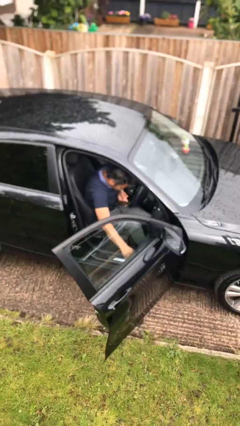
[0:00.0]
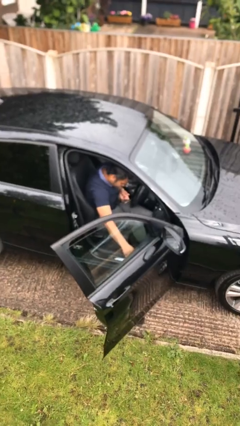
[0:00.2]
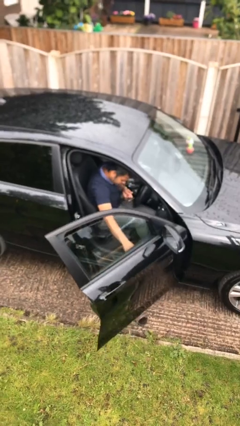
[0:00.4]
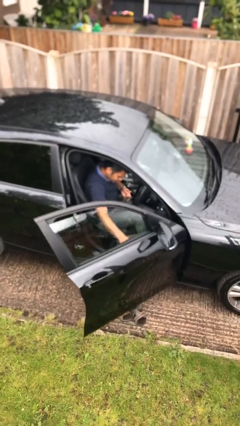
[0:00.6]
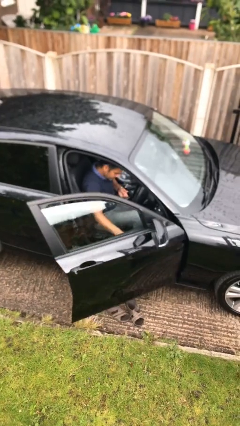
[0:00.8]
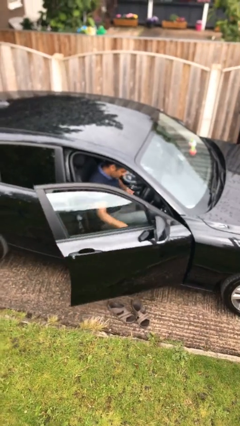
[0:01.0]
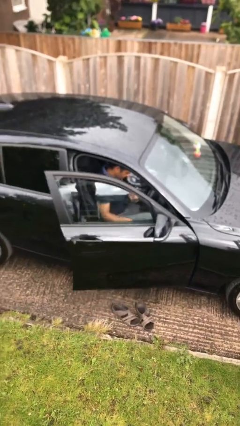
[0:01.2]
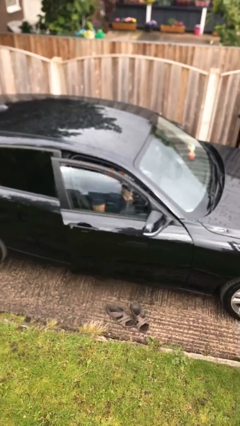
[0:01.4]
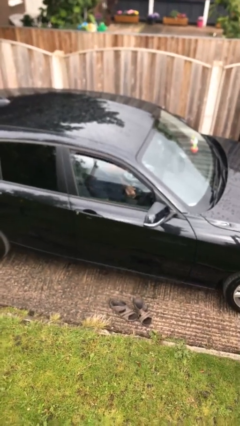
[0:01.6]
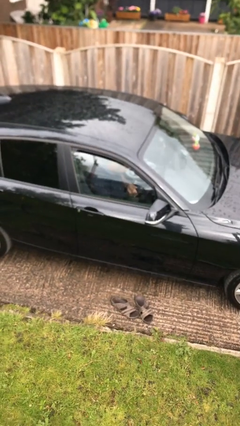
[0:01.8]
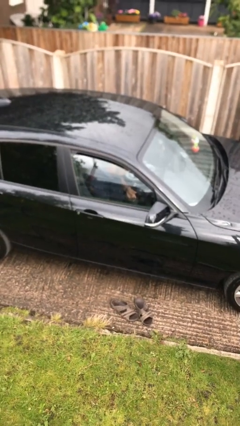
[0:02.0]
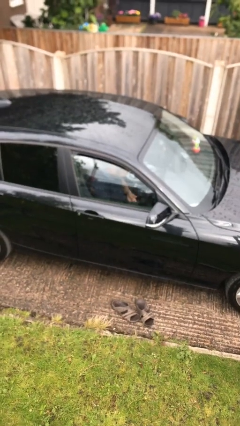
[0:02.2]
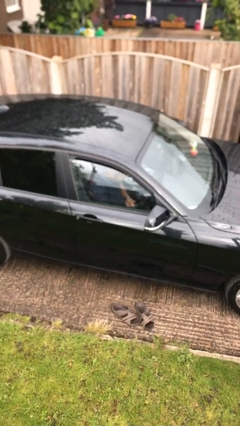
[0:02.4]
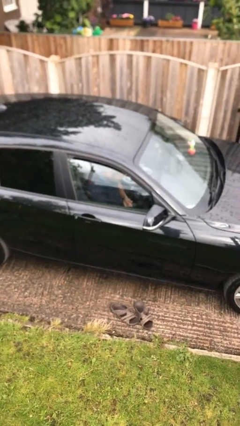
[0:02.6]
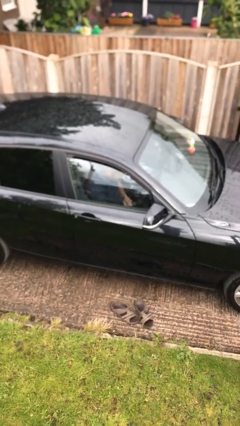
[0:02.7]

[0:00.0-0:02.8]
person closes car door

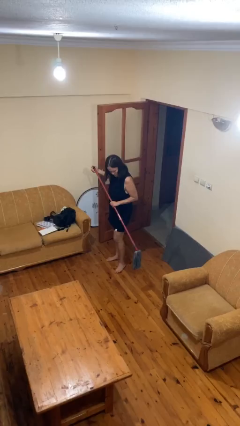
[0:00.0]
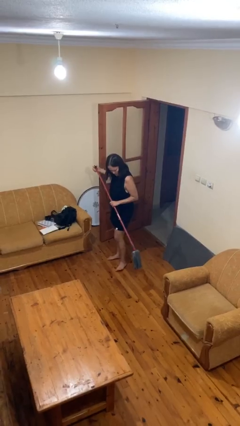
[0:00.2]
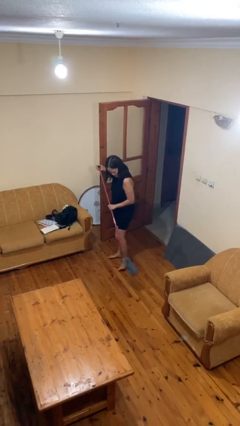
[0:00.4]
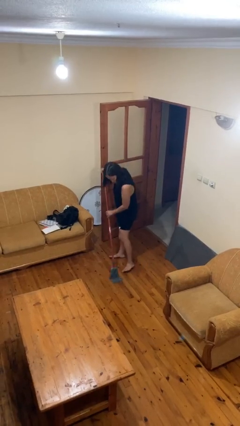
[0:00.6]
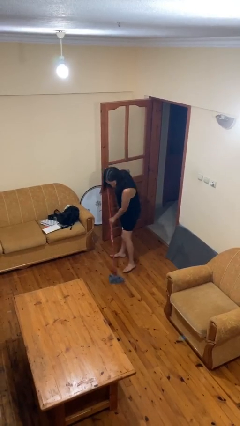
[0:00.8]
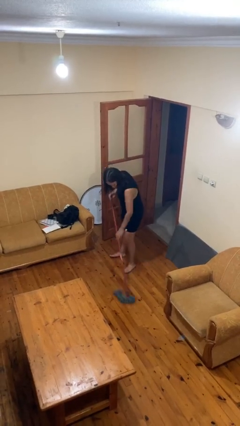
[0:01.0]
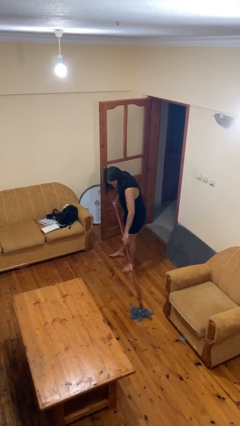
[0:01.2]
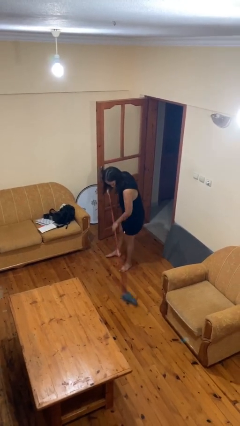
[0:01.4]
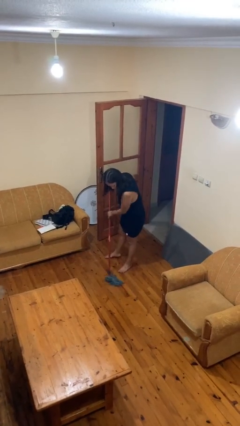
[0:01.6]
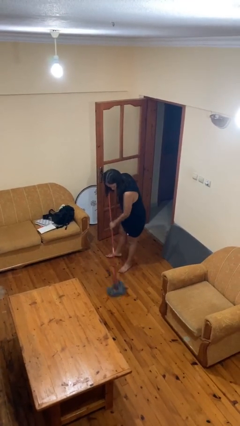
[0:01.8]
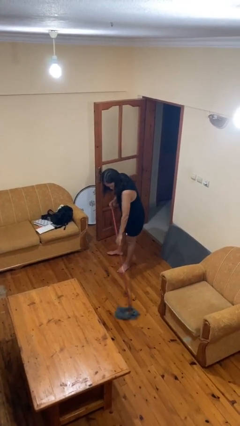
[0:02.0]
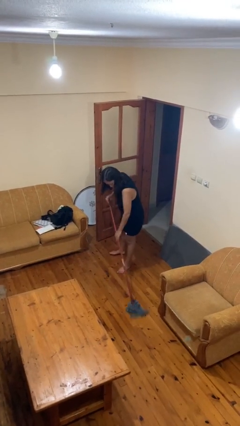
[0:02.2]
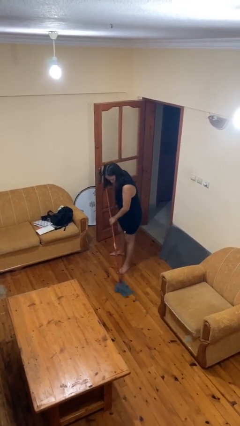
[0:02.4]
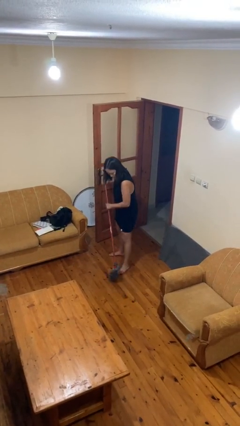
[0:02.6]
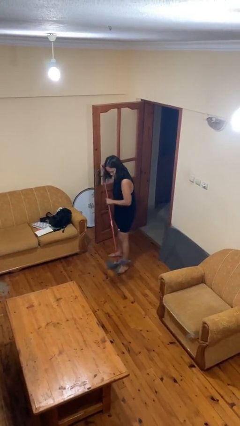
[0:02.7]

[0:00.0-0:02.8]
person mops

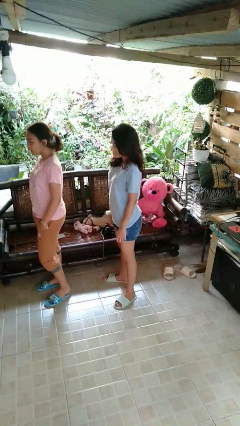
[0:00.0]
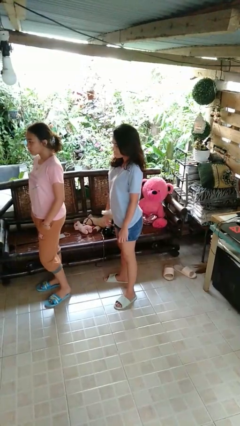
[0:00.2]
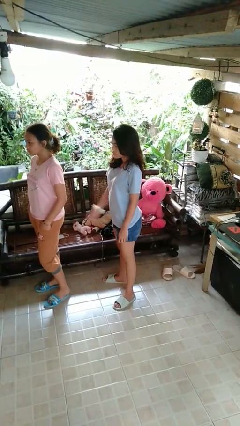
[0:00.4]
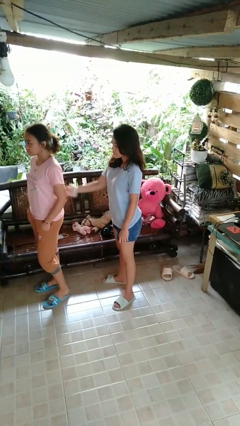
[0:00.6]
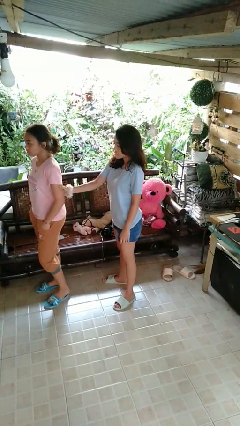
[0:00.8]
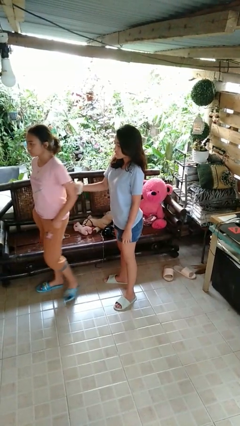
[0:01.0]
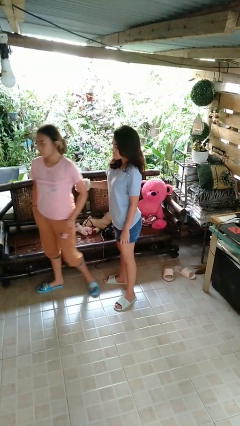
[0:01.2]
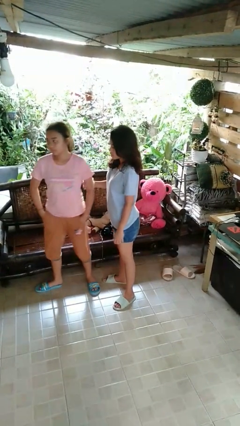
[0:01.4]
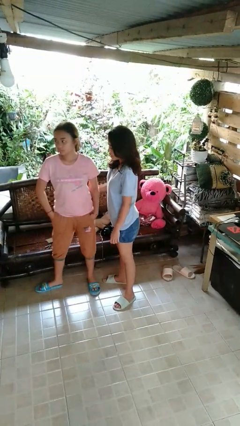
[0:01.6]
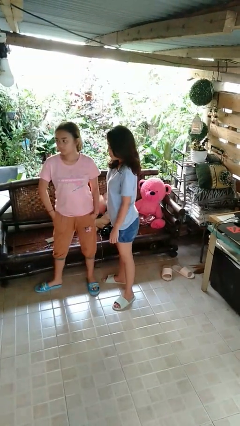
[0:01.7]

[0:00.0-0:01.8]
person grabs person by bicep

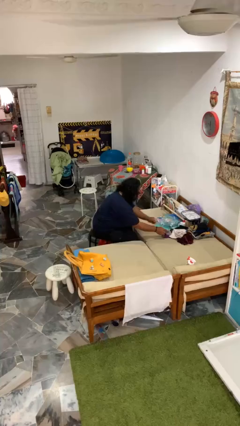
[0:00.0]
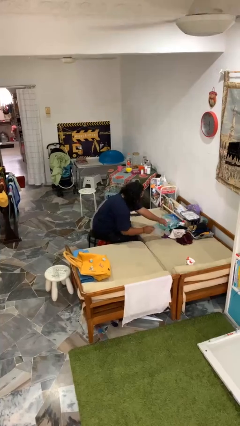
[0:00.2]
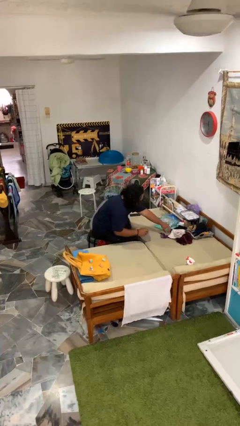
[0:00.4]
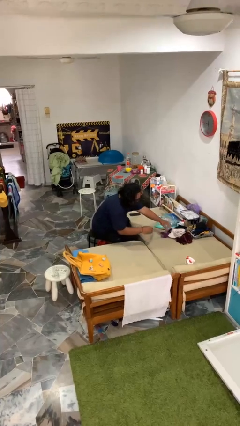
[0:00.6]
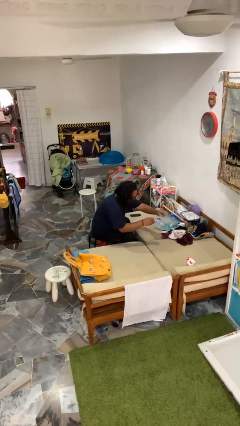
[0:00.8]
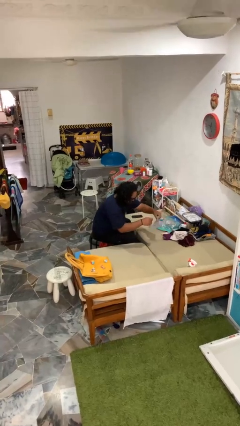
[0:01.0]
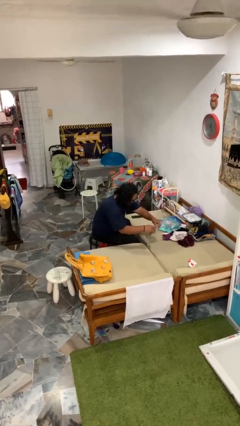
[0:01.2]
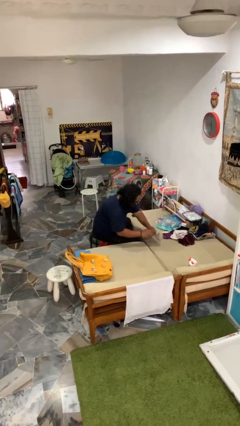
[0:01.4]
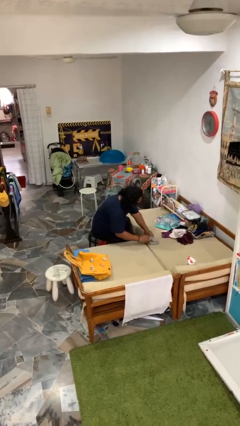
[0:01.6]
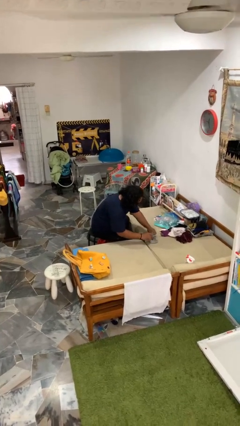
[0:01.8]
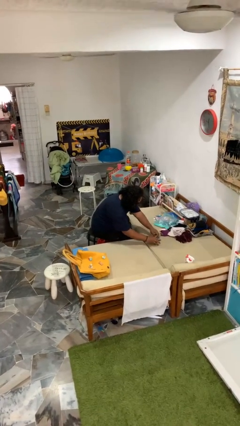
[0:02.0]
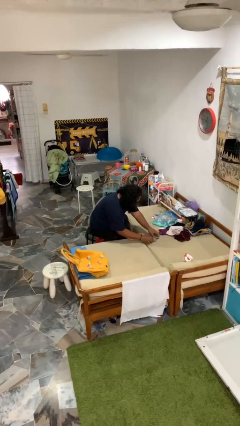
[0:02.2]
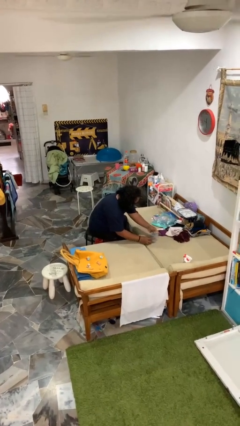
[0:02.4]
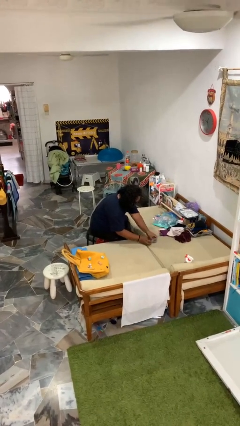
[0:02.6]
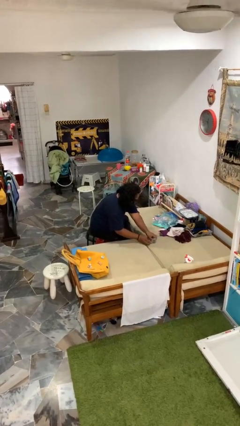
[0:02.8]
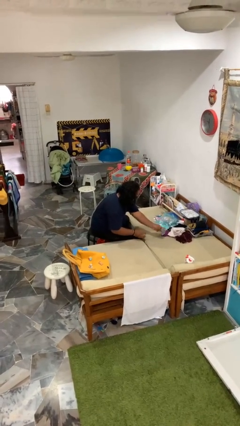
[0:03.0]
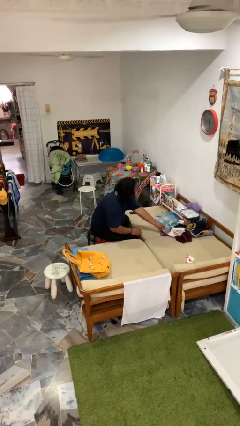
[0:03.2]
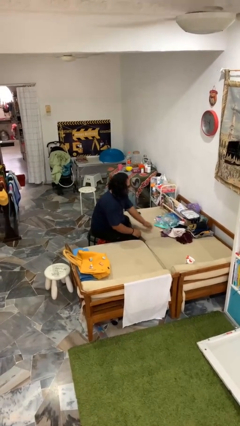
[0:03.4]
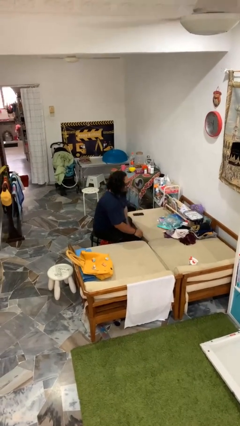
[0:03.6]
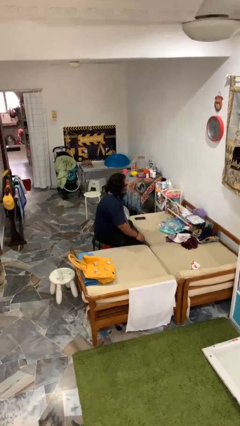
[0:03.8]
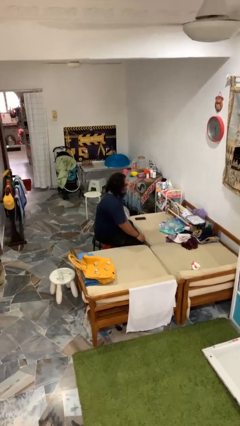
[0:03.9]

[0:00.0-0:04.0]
person folds socks

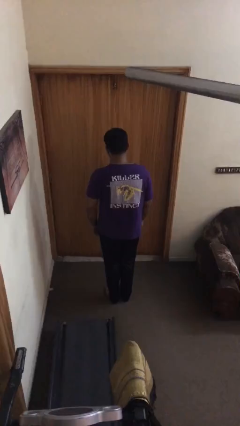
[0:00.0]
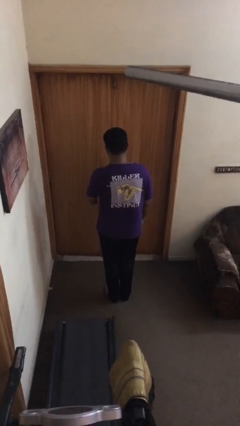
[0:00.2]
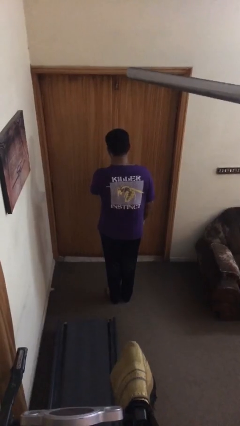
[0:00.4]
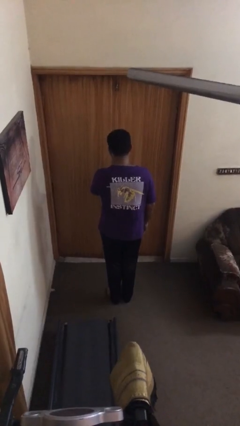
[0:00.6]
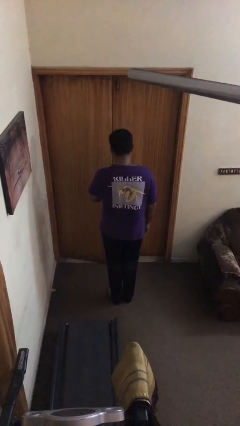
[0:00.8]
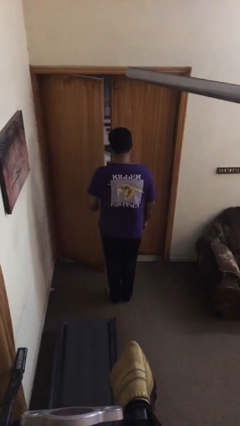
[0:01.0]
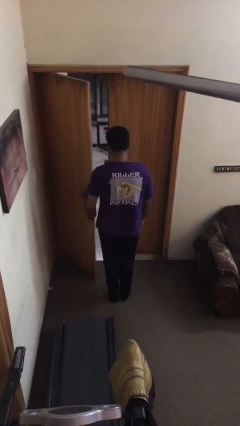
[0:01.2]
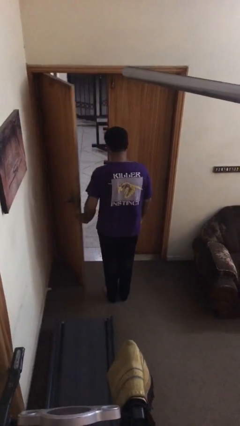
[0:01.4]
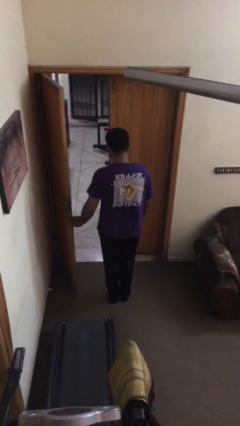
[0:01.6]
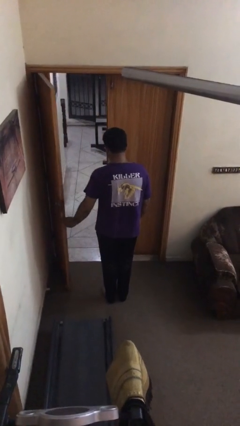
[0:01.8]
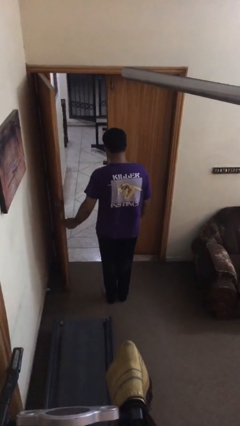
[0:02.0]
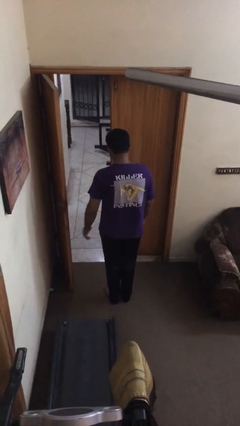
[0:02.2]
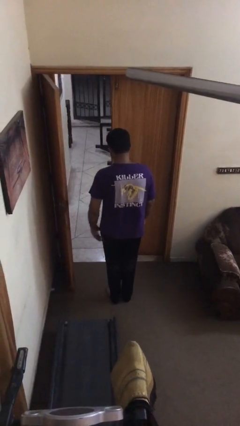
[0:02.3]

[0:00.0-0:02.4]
person opens facility door

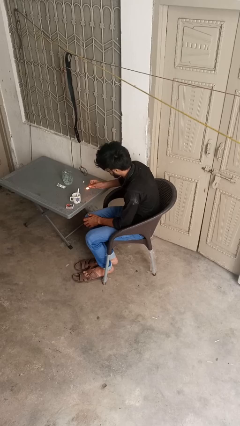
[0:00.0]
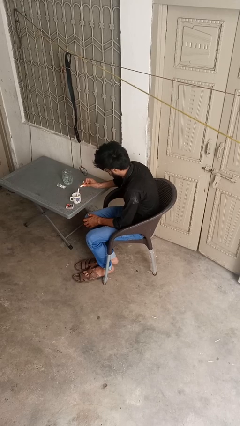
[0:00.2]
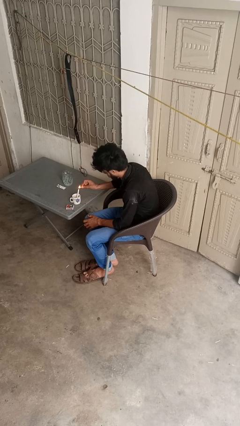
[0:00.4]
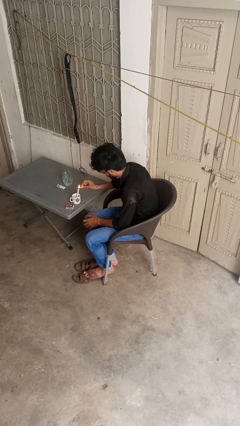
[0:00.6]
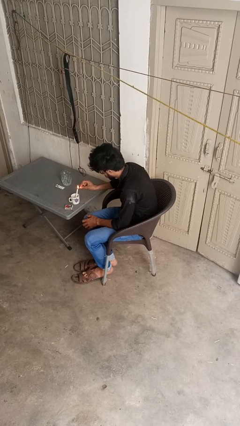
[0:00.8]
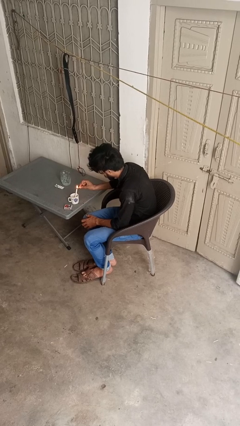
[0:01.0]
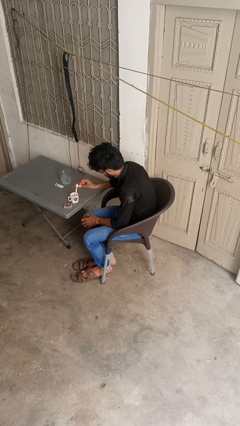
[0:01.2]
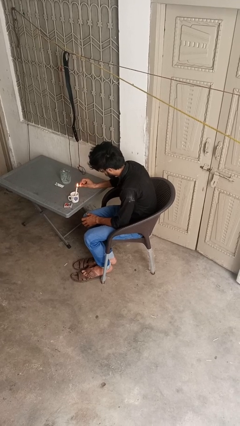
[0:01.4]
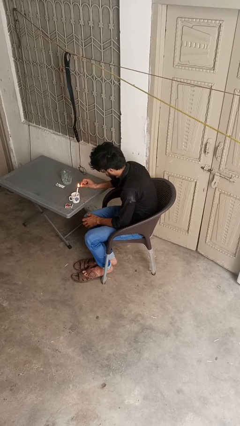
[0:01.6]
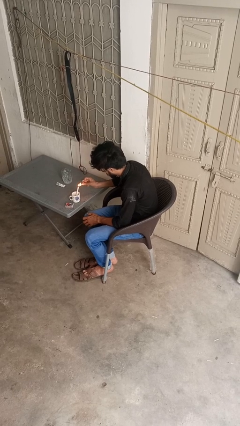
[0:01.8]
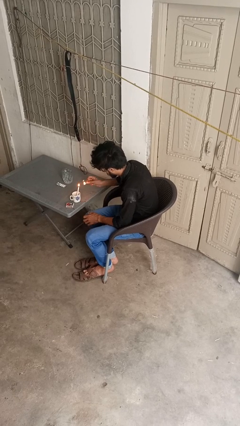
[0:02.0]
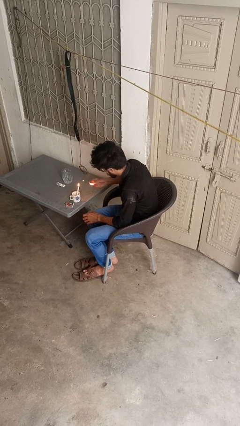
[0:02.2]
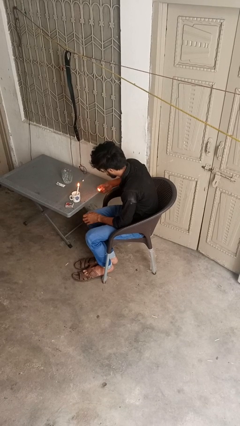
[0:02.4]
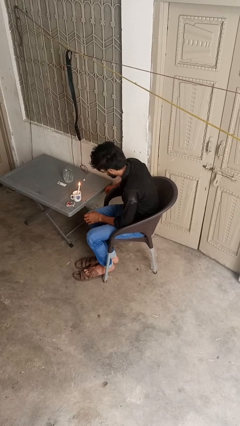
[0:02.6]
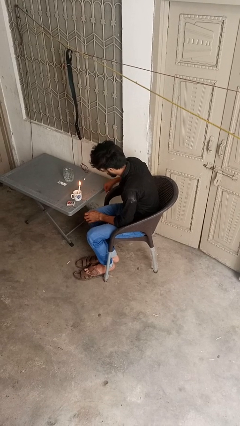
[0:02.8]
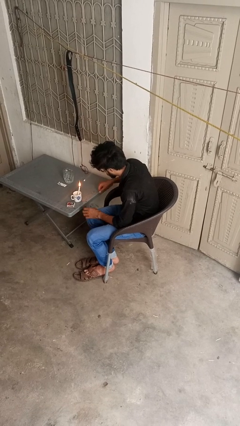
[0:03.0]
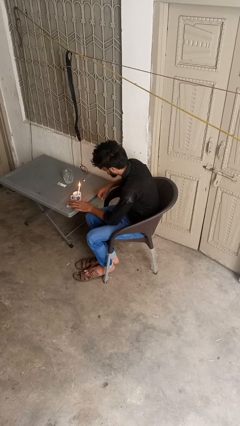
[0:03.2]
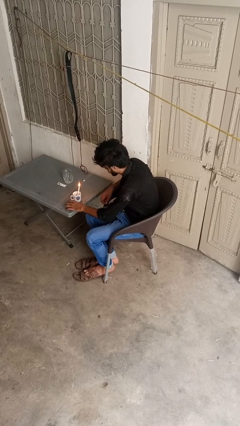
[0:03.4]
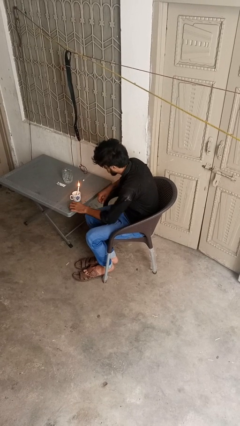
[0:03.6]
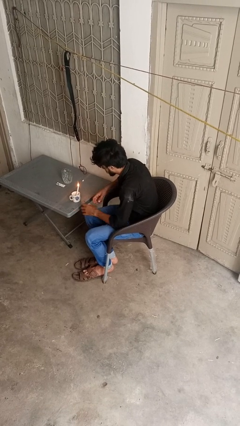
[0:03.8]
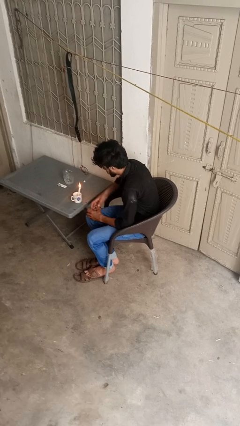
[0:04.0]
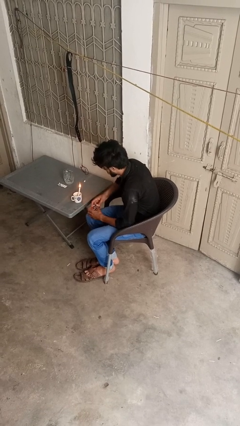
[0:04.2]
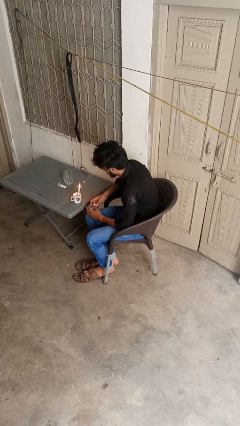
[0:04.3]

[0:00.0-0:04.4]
person lights candle
